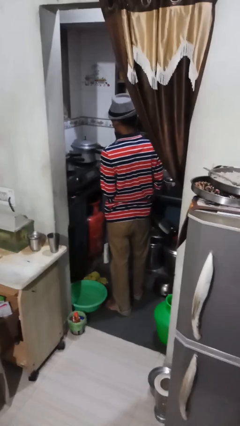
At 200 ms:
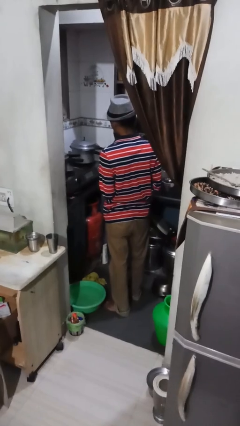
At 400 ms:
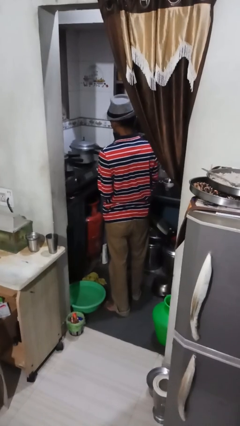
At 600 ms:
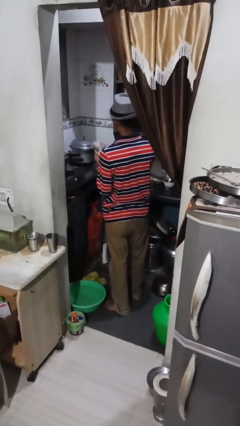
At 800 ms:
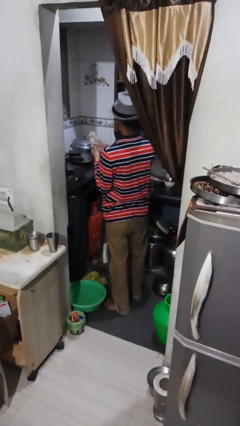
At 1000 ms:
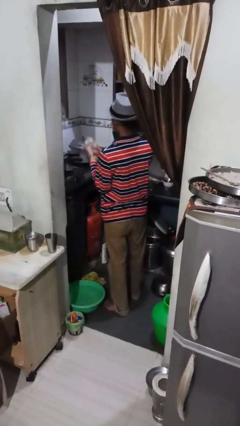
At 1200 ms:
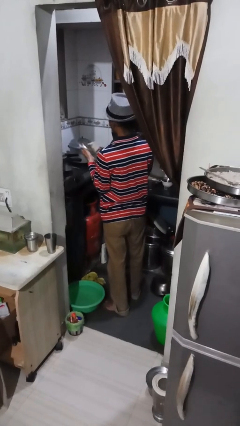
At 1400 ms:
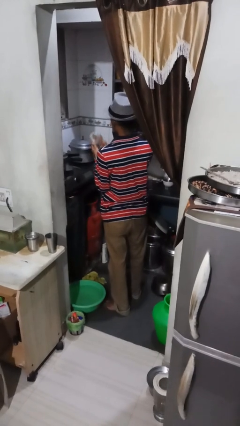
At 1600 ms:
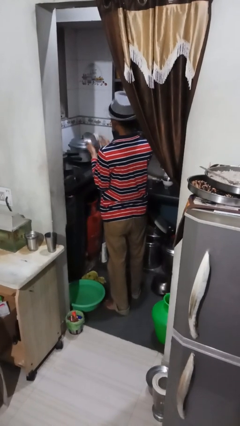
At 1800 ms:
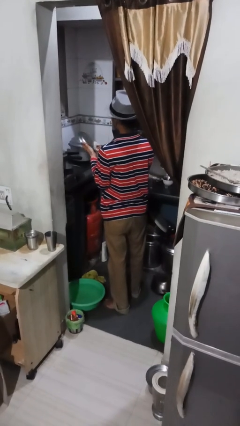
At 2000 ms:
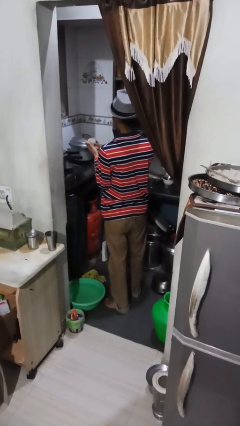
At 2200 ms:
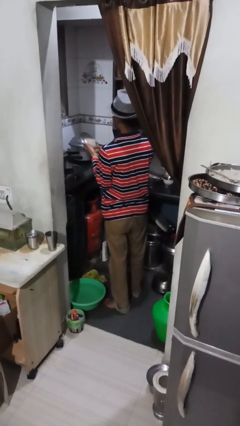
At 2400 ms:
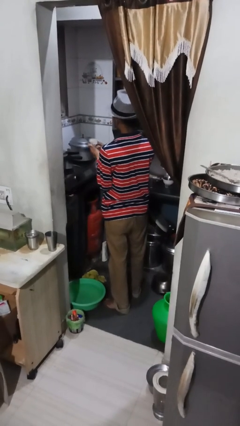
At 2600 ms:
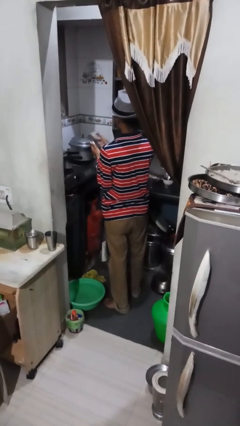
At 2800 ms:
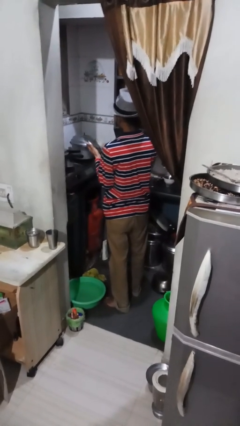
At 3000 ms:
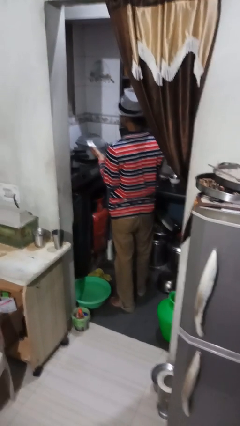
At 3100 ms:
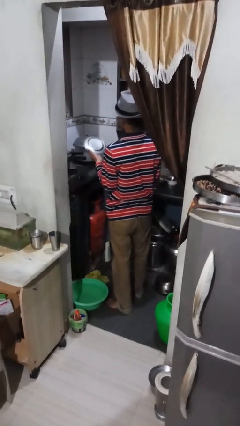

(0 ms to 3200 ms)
person dries dish

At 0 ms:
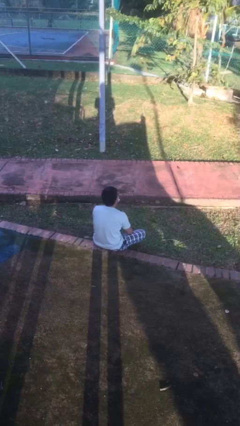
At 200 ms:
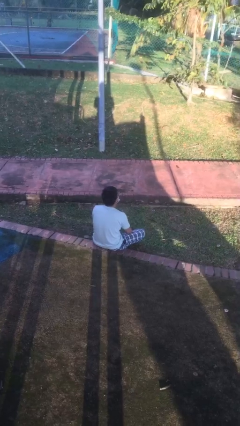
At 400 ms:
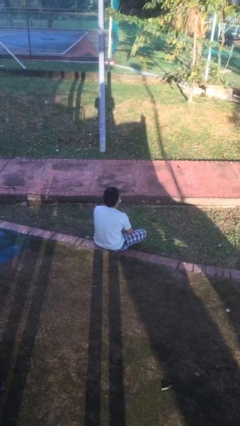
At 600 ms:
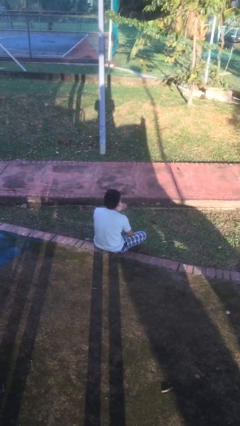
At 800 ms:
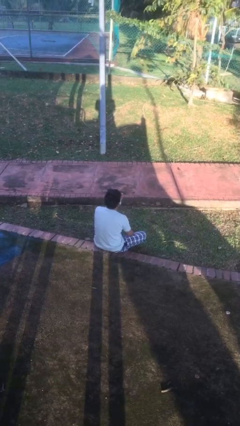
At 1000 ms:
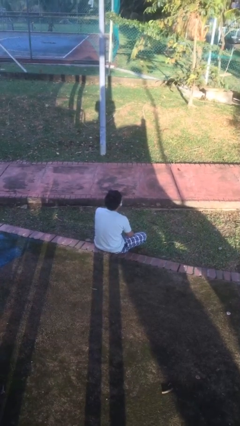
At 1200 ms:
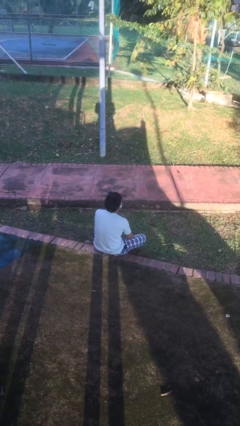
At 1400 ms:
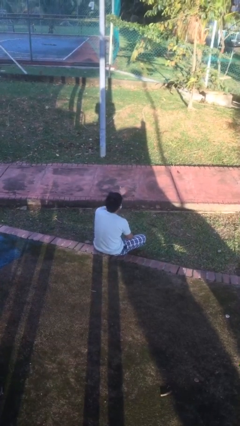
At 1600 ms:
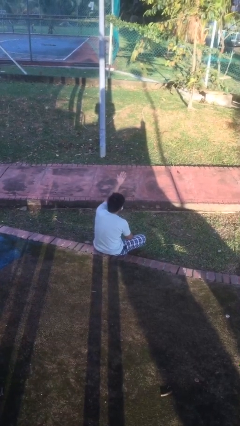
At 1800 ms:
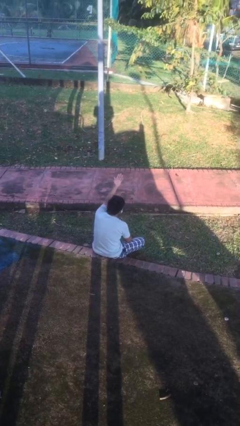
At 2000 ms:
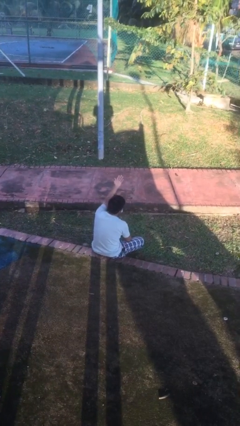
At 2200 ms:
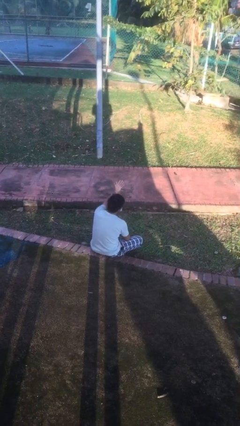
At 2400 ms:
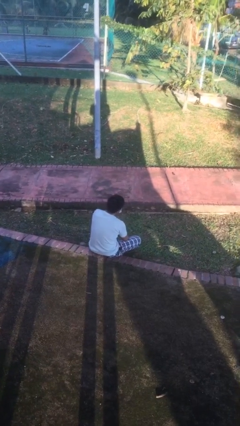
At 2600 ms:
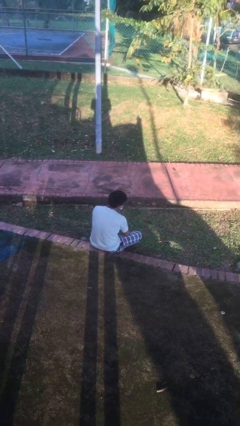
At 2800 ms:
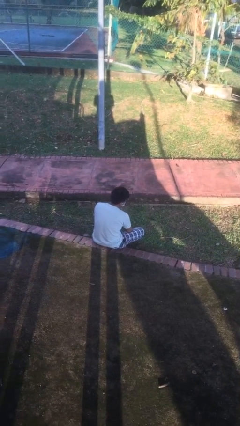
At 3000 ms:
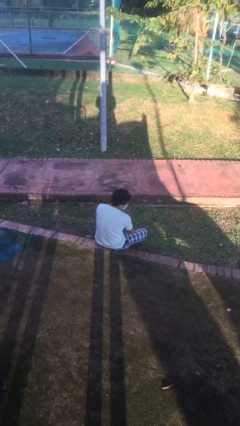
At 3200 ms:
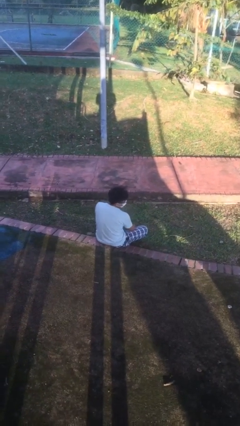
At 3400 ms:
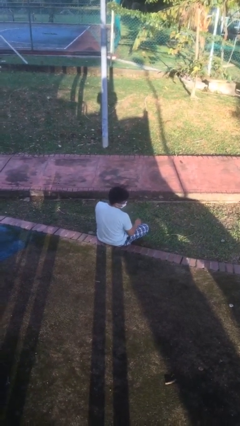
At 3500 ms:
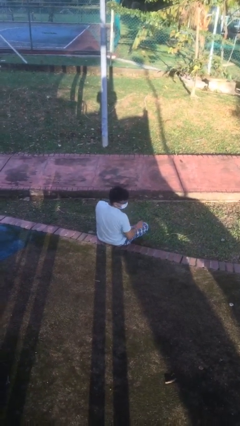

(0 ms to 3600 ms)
person gestures blow kiss

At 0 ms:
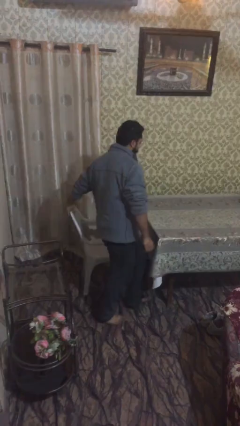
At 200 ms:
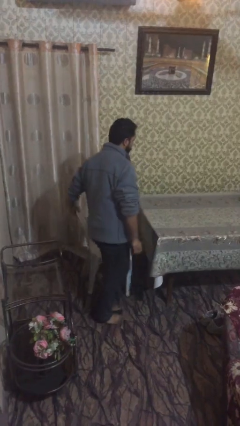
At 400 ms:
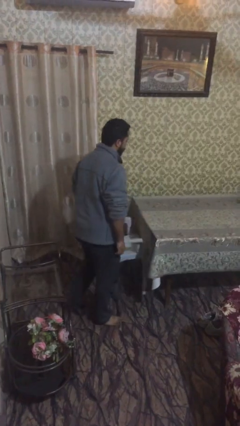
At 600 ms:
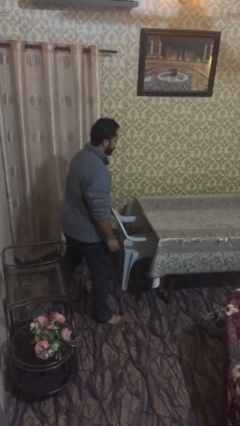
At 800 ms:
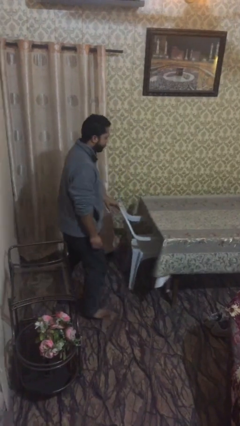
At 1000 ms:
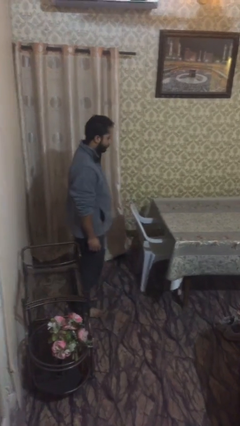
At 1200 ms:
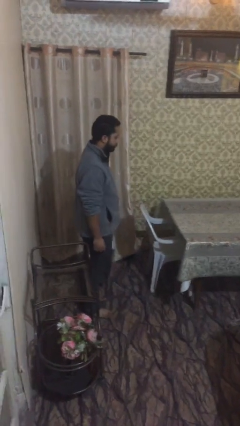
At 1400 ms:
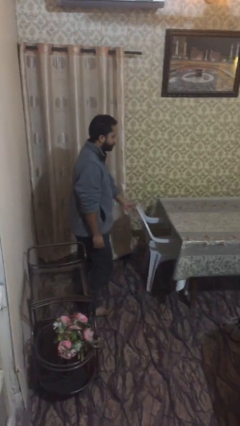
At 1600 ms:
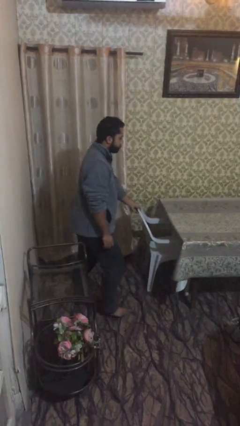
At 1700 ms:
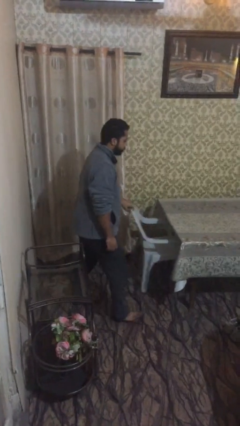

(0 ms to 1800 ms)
person stands up

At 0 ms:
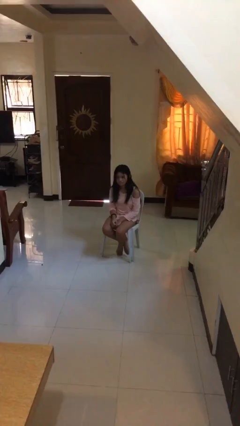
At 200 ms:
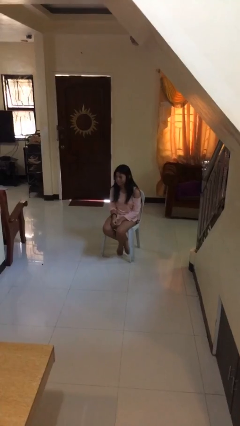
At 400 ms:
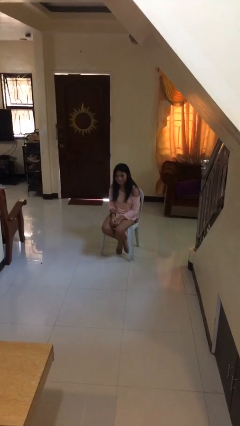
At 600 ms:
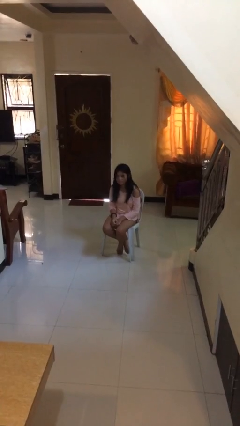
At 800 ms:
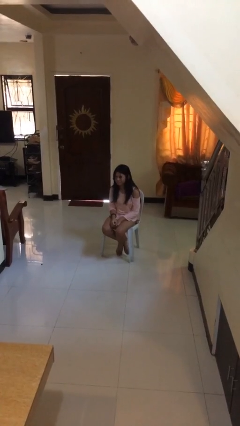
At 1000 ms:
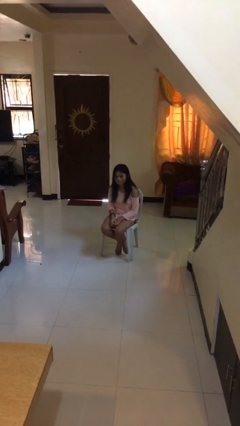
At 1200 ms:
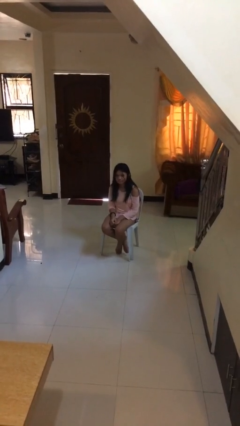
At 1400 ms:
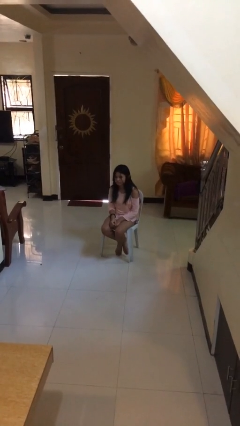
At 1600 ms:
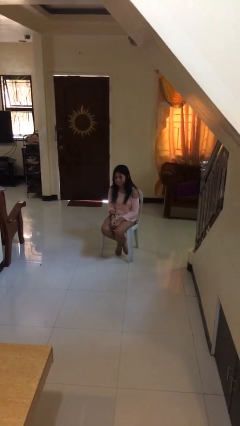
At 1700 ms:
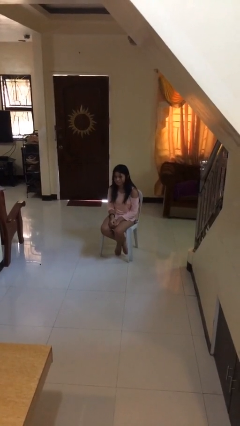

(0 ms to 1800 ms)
person shakes head

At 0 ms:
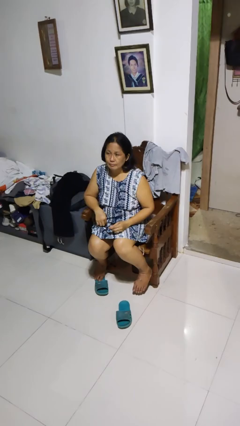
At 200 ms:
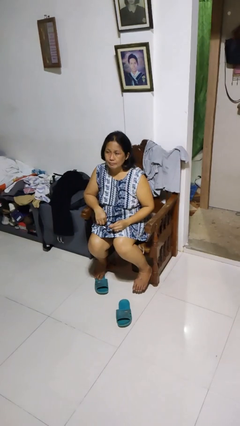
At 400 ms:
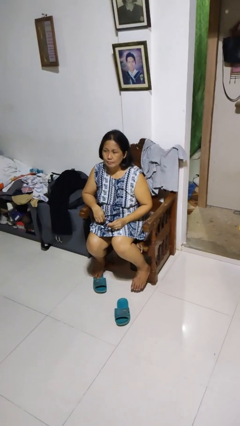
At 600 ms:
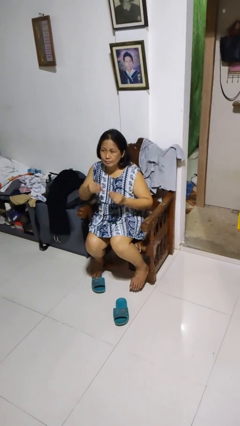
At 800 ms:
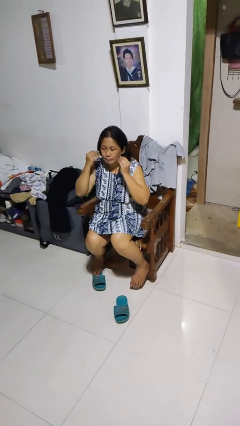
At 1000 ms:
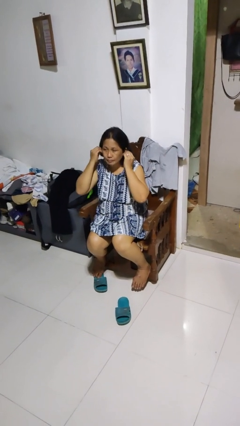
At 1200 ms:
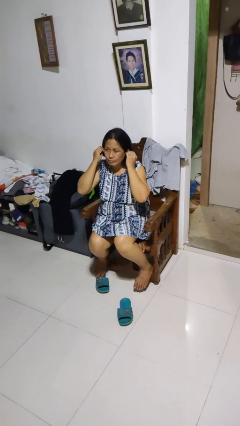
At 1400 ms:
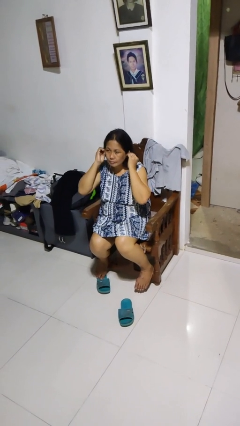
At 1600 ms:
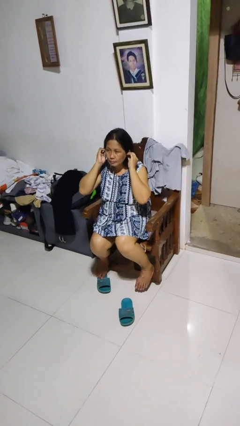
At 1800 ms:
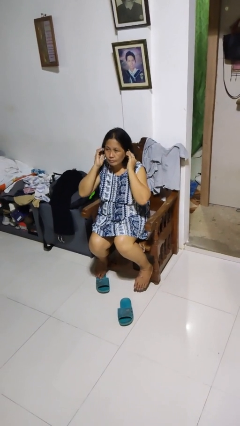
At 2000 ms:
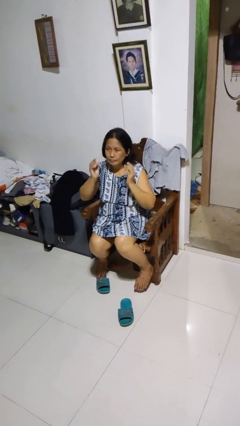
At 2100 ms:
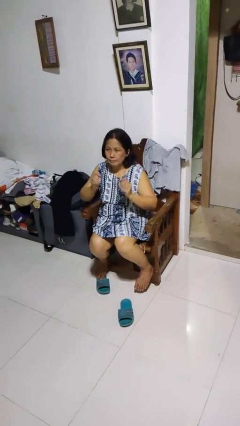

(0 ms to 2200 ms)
person puts on headphones

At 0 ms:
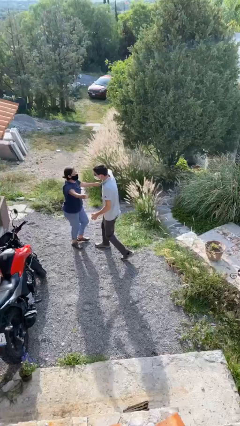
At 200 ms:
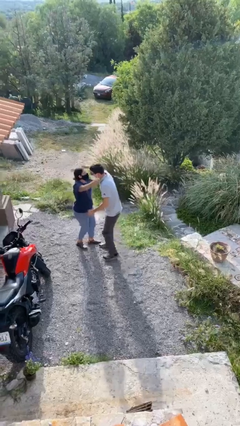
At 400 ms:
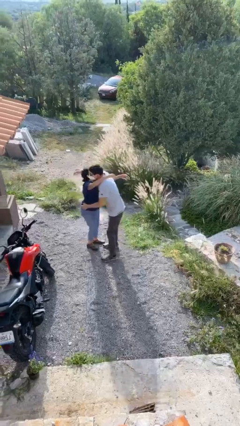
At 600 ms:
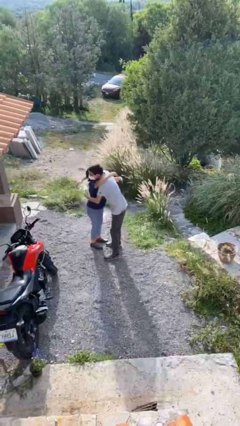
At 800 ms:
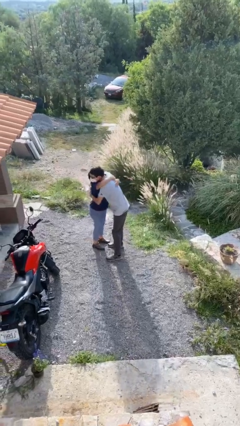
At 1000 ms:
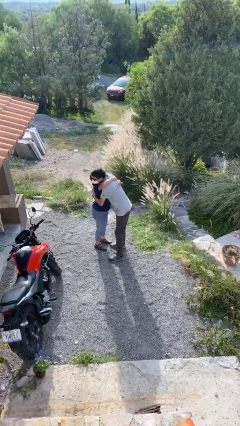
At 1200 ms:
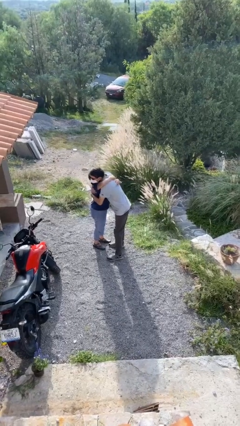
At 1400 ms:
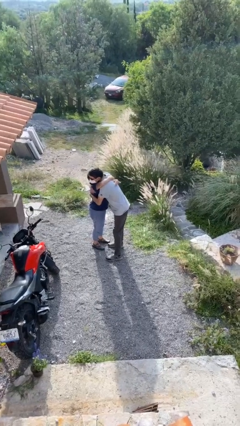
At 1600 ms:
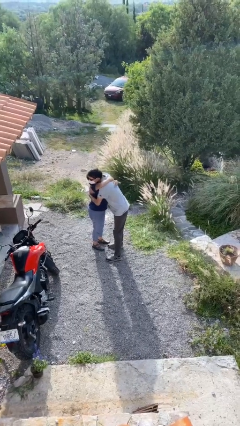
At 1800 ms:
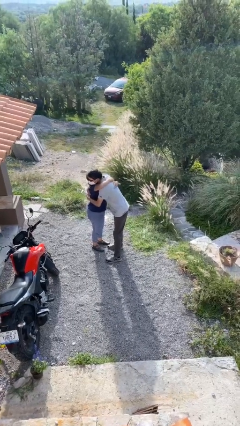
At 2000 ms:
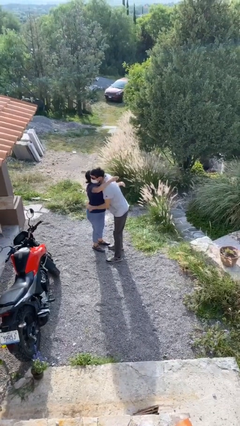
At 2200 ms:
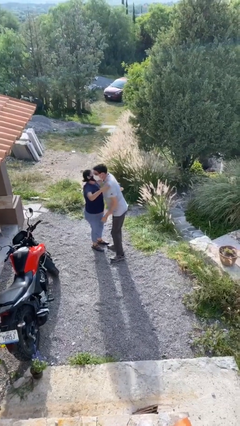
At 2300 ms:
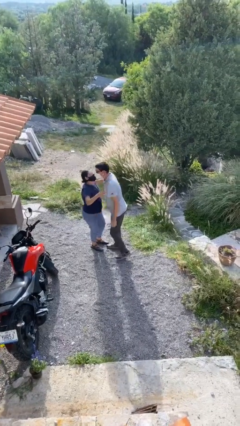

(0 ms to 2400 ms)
person embraces person

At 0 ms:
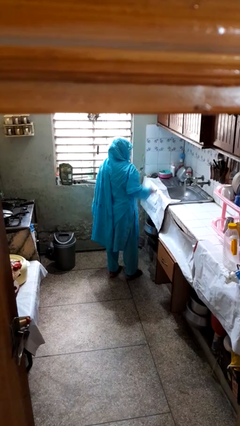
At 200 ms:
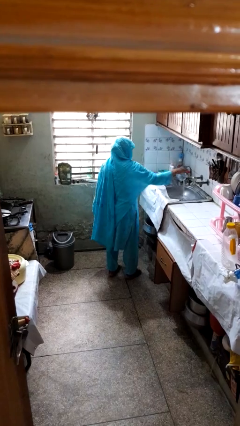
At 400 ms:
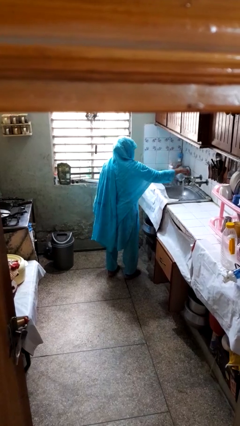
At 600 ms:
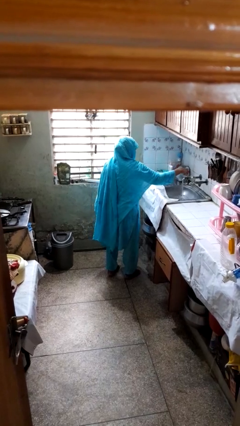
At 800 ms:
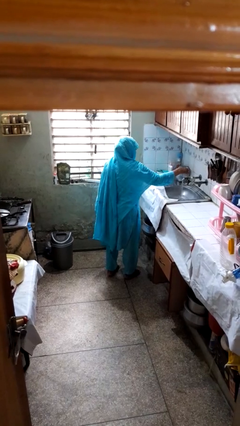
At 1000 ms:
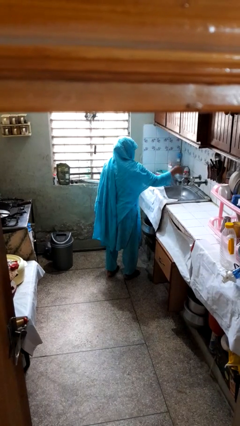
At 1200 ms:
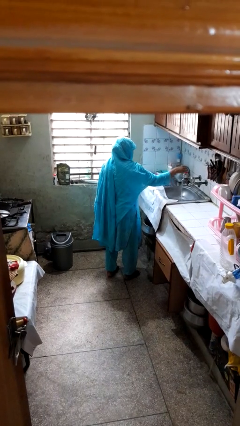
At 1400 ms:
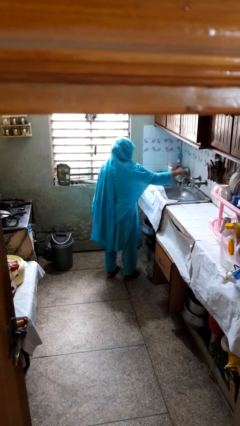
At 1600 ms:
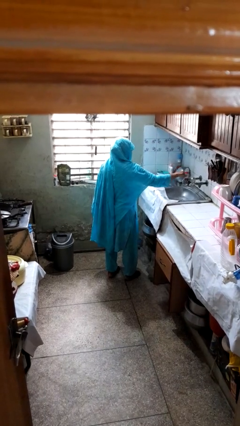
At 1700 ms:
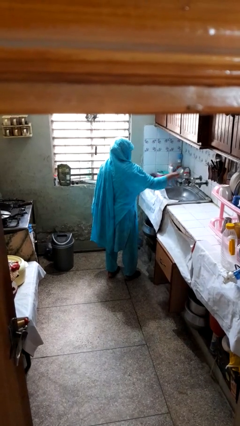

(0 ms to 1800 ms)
person turns off faucet
